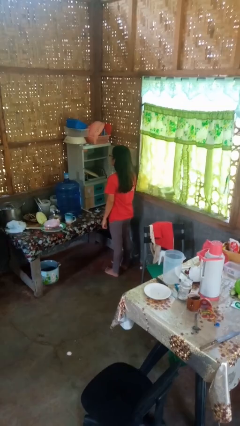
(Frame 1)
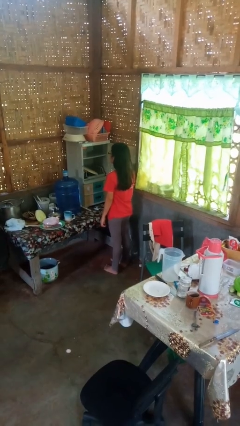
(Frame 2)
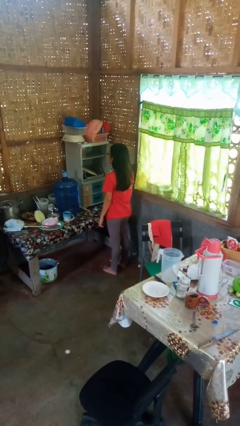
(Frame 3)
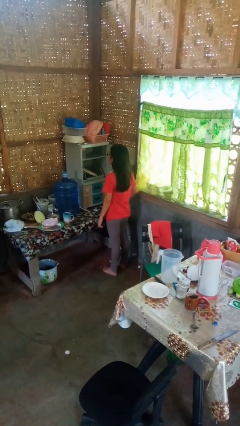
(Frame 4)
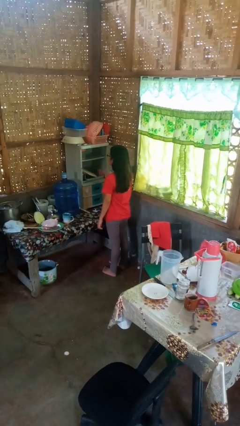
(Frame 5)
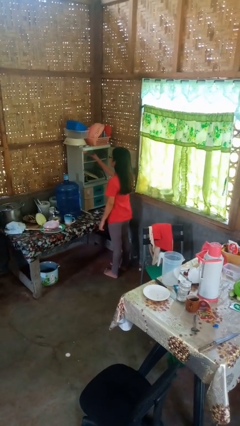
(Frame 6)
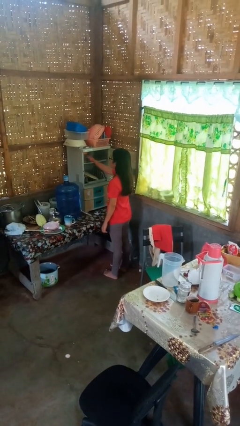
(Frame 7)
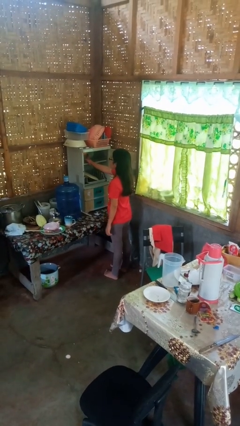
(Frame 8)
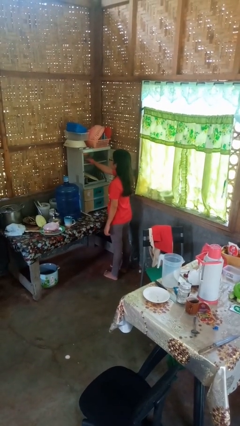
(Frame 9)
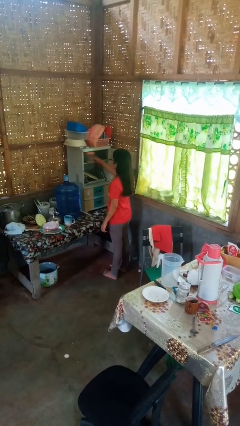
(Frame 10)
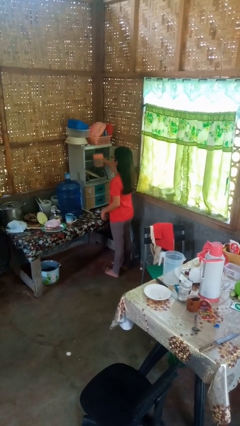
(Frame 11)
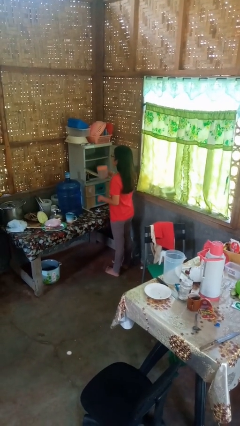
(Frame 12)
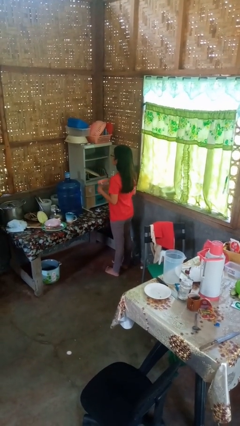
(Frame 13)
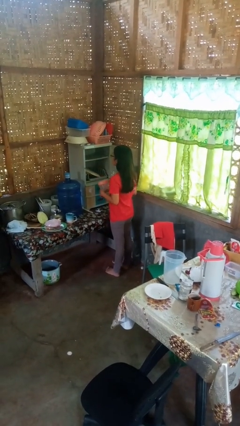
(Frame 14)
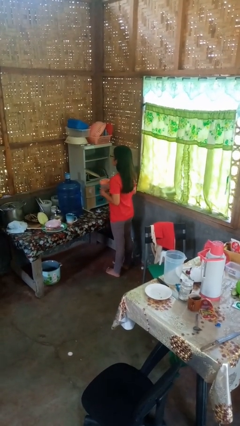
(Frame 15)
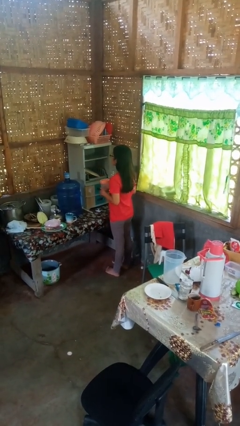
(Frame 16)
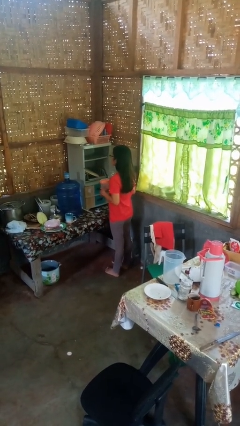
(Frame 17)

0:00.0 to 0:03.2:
person picks up object from cabinet

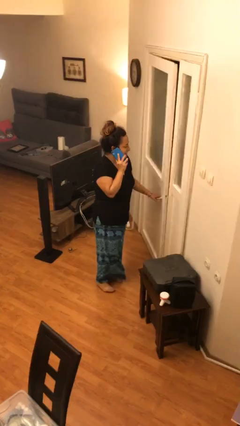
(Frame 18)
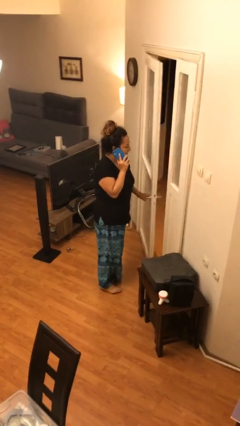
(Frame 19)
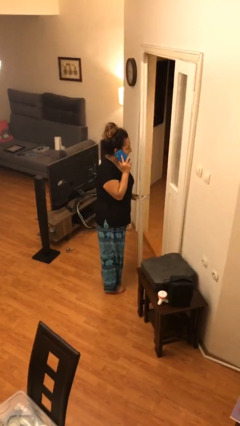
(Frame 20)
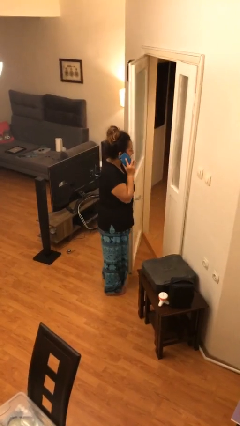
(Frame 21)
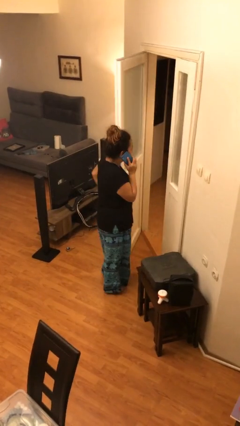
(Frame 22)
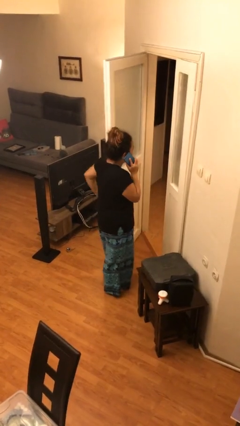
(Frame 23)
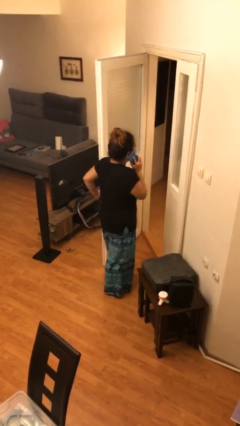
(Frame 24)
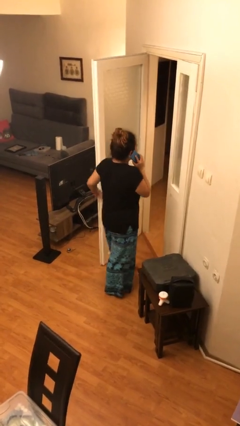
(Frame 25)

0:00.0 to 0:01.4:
person opens facility door

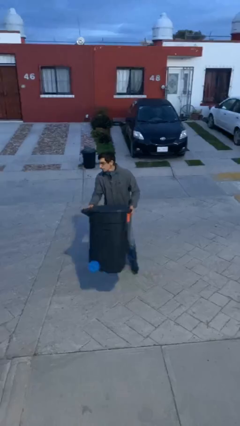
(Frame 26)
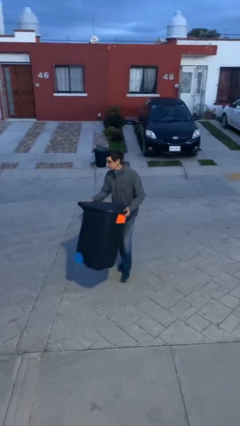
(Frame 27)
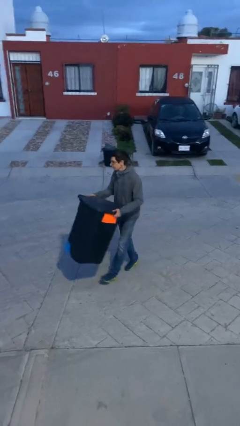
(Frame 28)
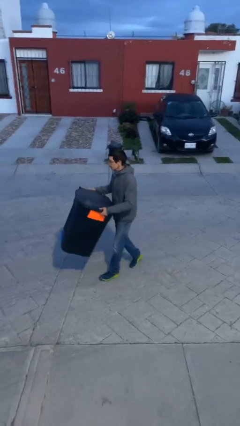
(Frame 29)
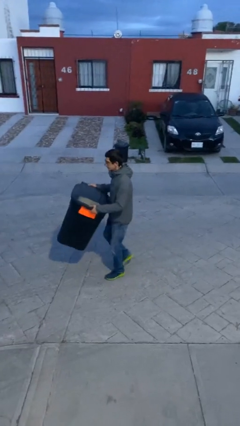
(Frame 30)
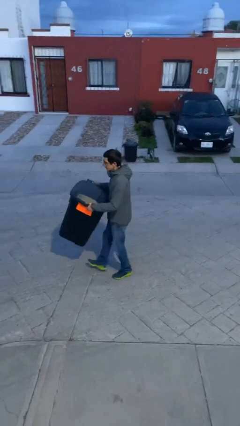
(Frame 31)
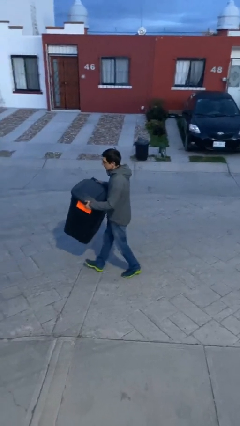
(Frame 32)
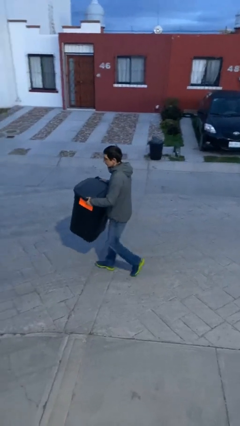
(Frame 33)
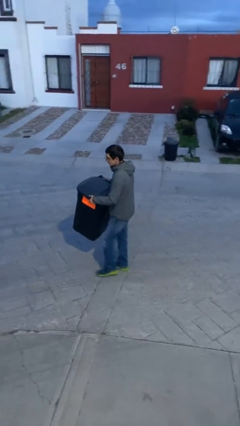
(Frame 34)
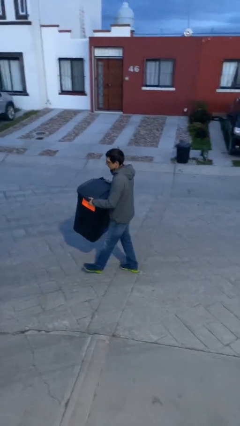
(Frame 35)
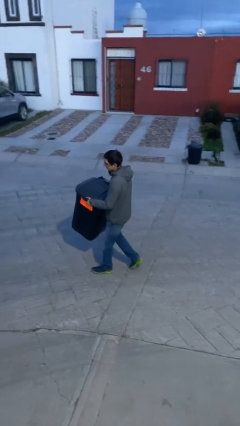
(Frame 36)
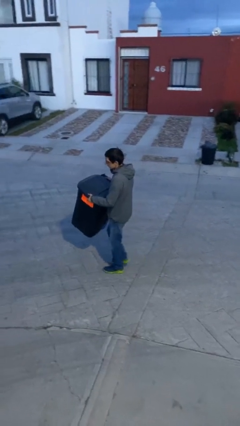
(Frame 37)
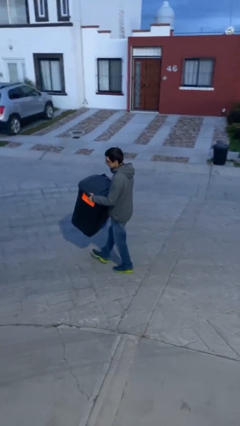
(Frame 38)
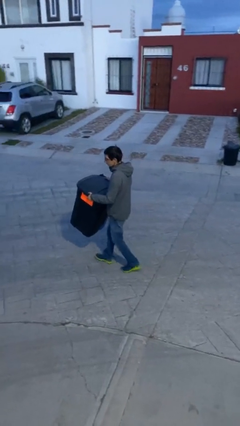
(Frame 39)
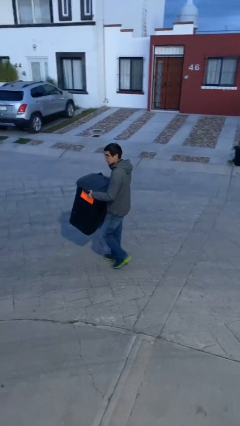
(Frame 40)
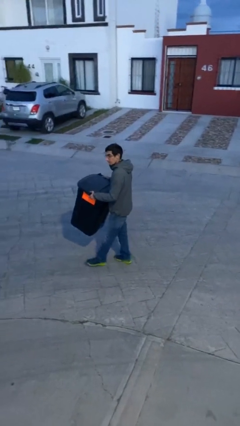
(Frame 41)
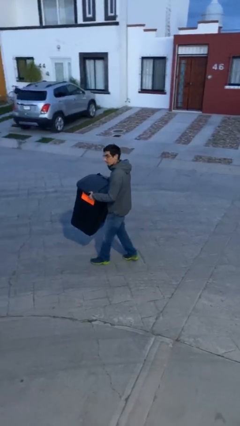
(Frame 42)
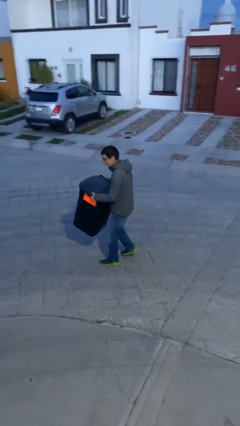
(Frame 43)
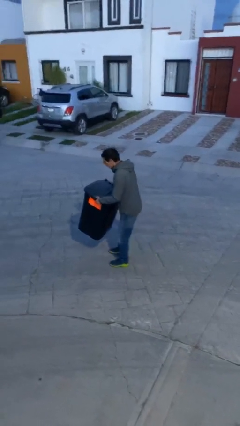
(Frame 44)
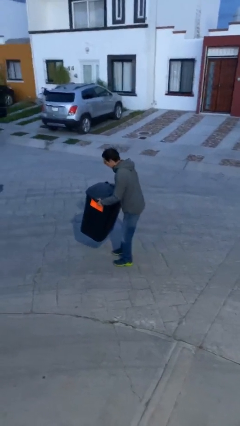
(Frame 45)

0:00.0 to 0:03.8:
person carries heavy object

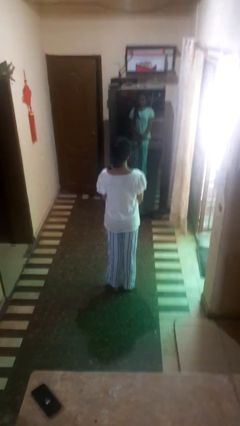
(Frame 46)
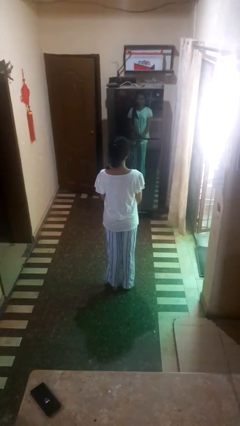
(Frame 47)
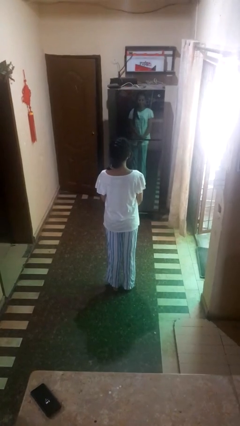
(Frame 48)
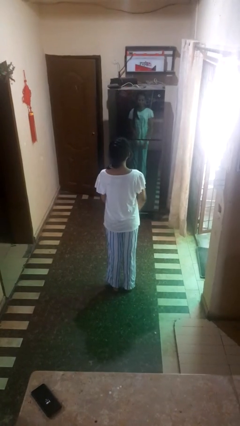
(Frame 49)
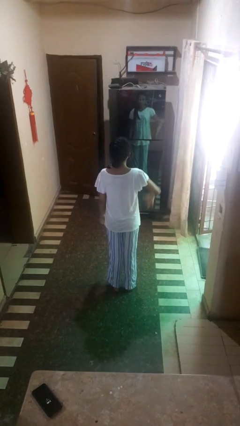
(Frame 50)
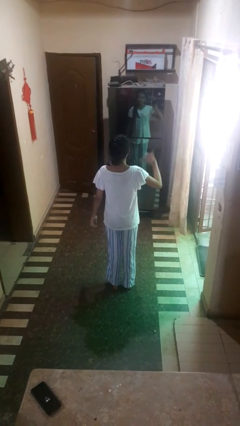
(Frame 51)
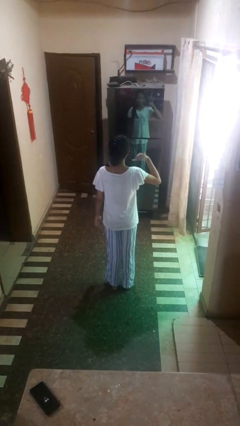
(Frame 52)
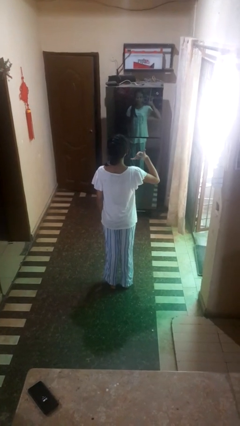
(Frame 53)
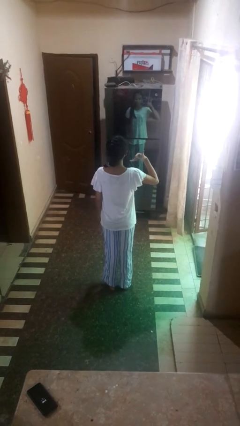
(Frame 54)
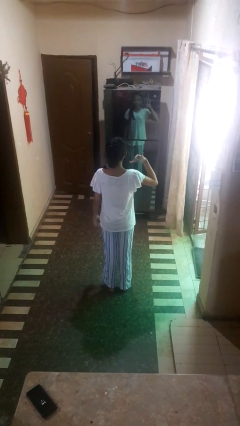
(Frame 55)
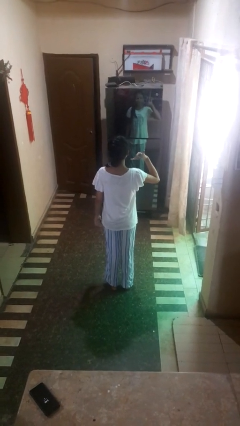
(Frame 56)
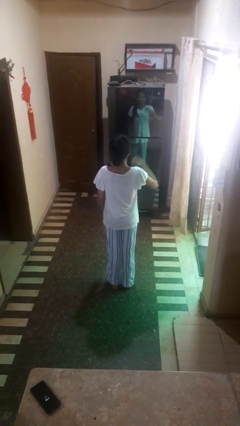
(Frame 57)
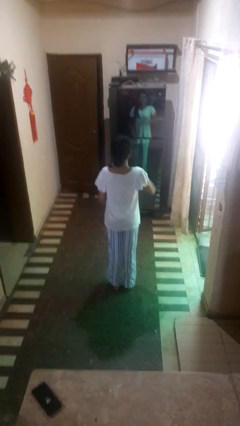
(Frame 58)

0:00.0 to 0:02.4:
person gestures call me

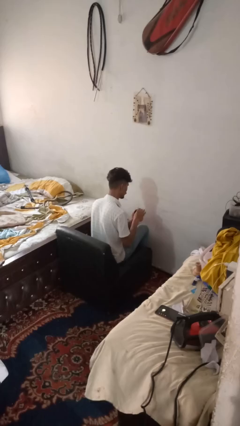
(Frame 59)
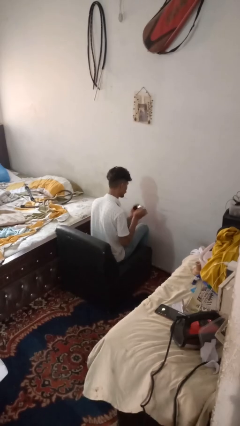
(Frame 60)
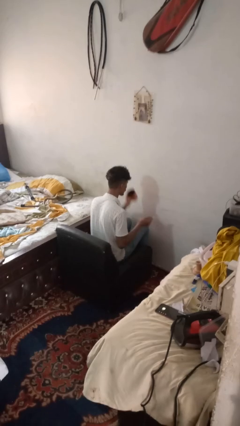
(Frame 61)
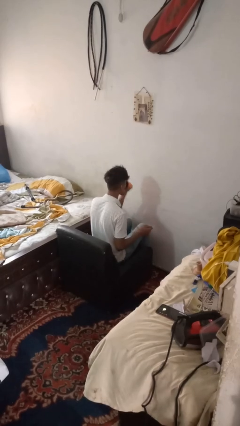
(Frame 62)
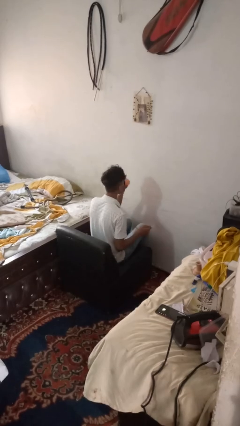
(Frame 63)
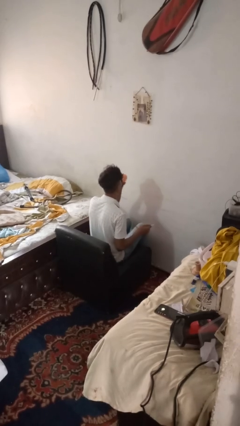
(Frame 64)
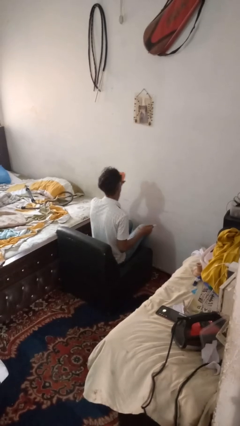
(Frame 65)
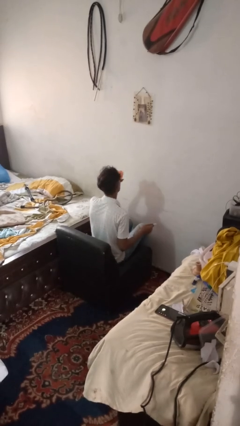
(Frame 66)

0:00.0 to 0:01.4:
person drinks from mug

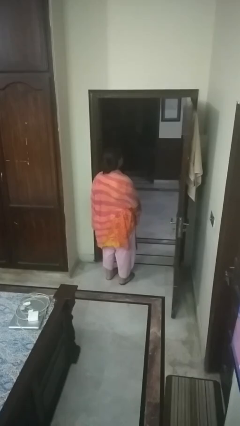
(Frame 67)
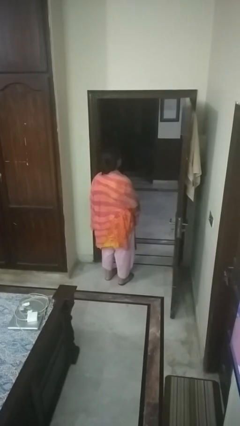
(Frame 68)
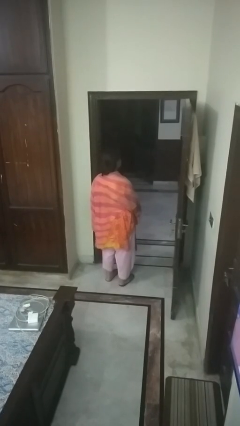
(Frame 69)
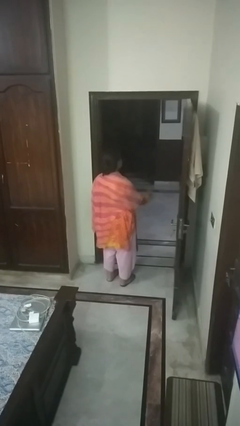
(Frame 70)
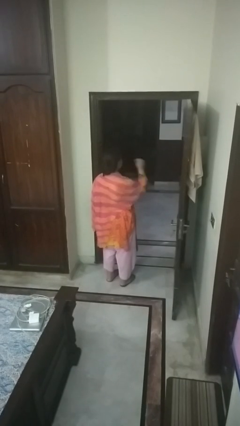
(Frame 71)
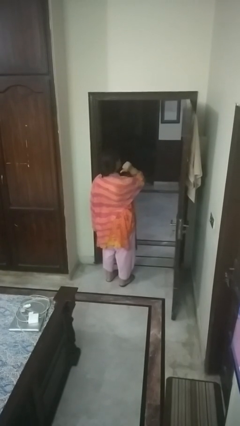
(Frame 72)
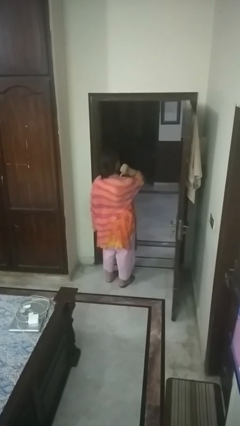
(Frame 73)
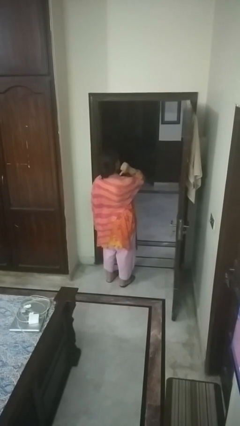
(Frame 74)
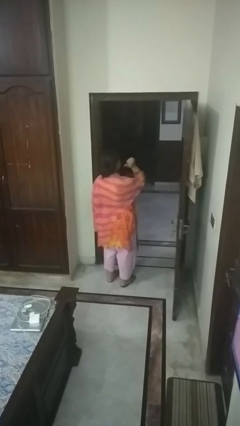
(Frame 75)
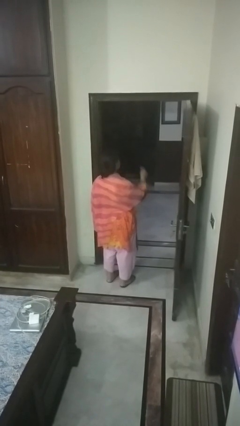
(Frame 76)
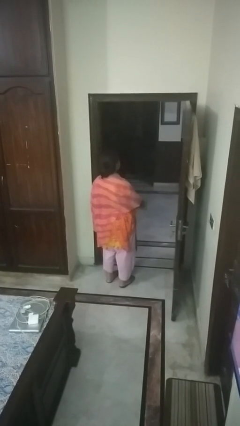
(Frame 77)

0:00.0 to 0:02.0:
person gestures behind me

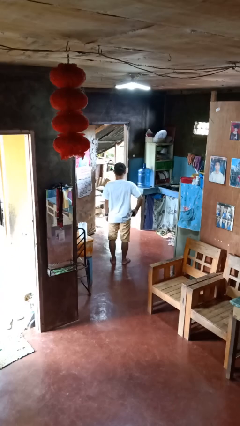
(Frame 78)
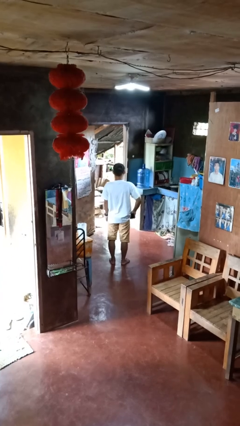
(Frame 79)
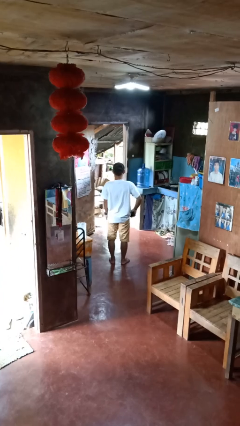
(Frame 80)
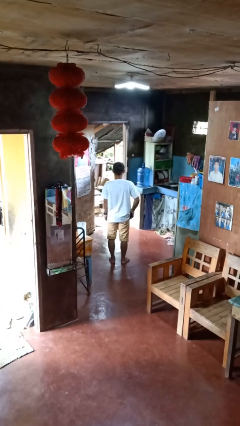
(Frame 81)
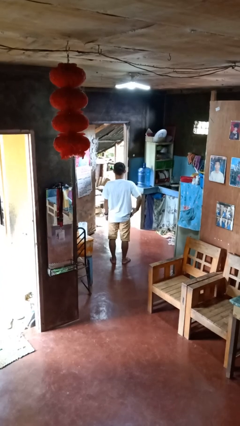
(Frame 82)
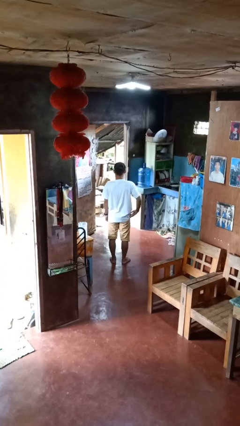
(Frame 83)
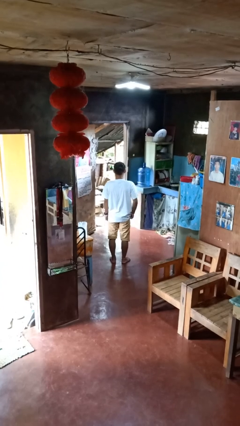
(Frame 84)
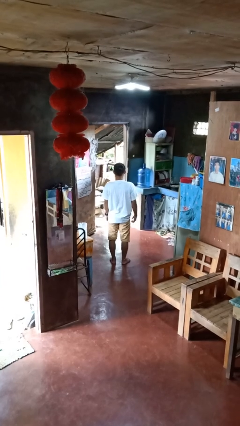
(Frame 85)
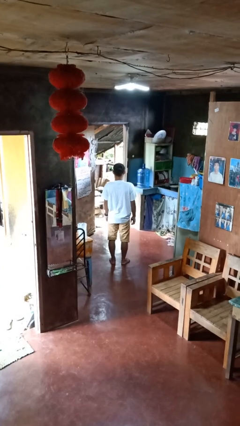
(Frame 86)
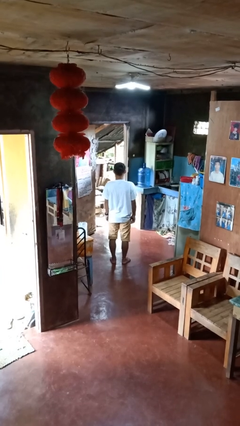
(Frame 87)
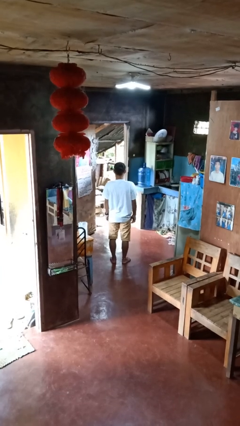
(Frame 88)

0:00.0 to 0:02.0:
person puts phone into pocket

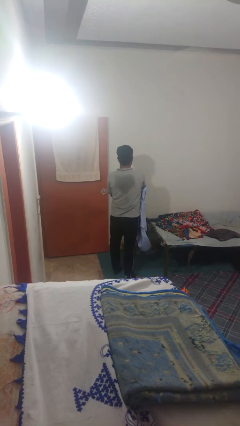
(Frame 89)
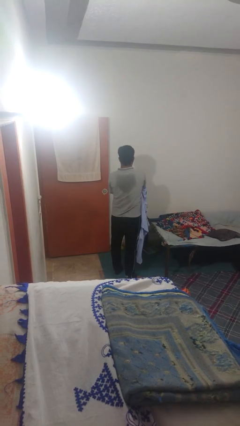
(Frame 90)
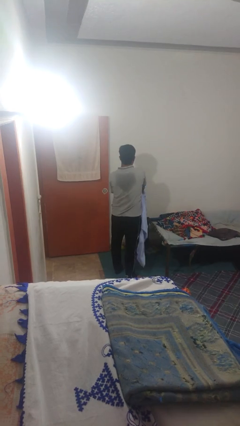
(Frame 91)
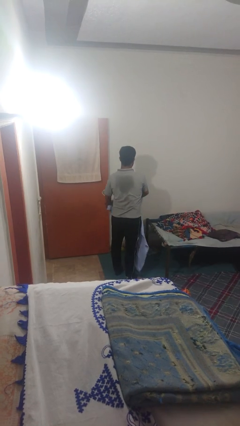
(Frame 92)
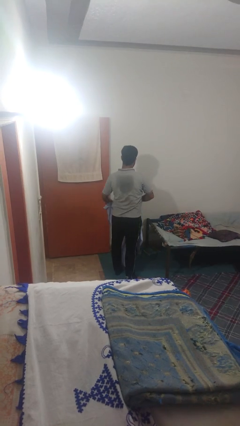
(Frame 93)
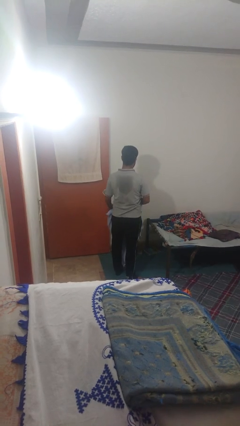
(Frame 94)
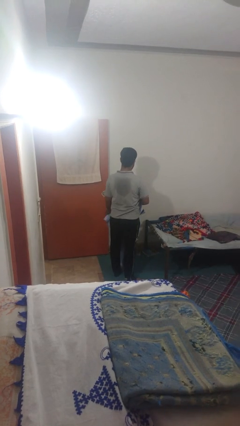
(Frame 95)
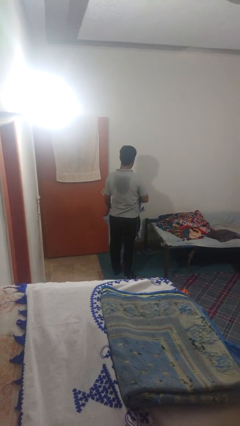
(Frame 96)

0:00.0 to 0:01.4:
person takes off shirt
